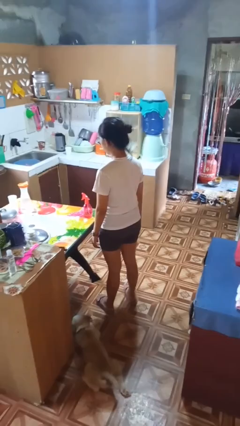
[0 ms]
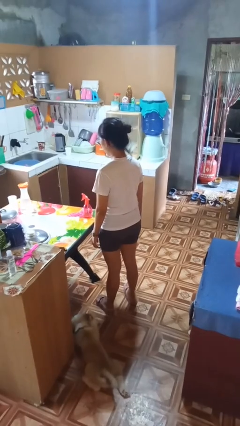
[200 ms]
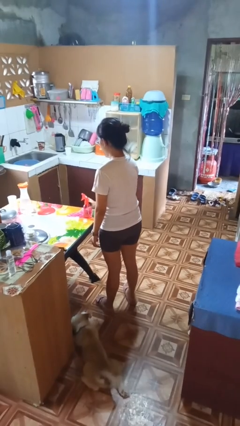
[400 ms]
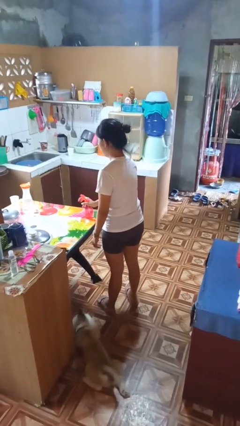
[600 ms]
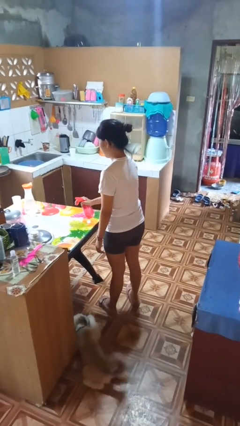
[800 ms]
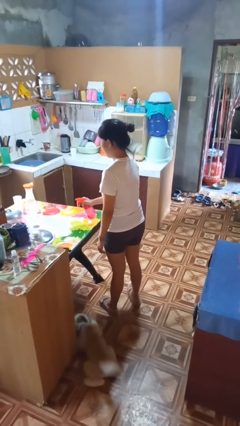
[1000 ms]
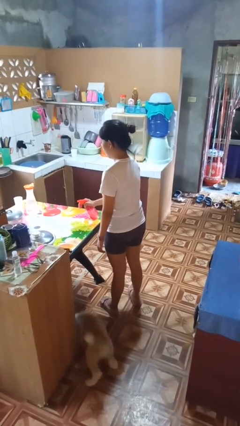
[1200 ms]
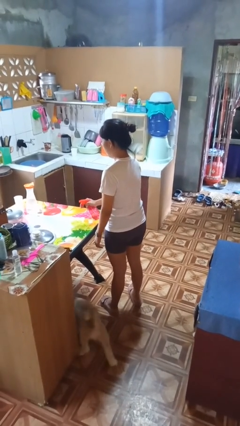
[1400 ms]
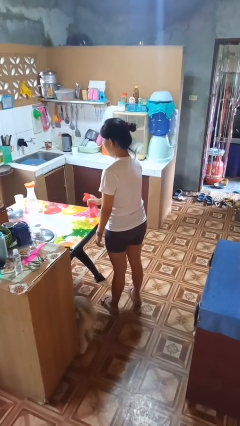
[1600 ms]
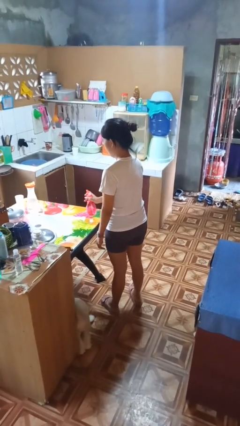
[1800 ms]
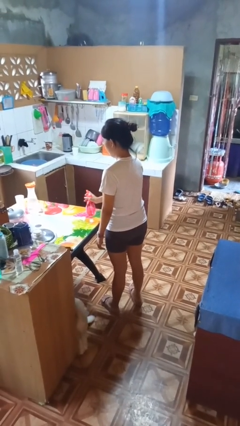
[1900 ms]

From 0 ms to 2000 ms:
person sprays from bottle

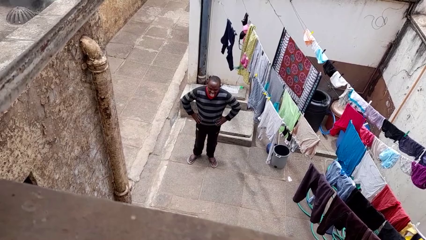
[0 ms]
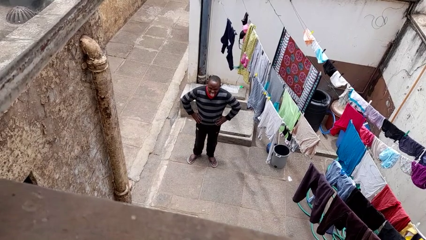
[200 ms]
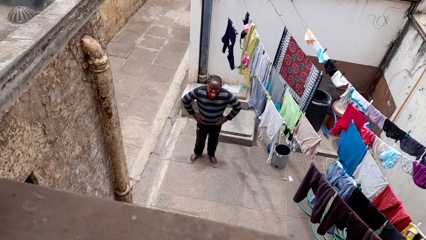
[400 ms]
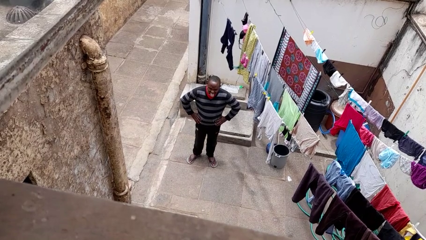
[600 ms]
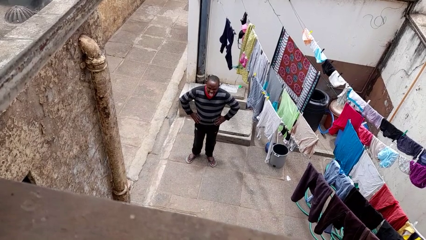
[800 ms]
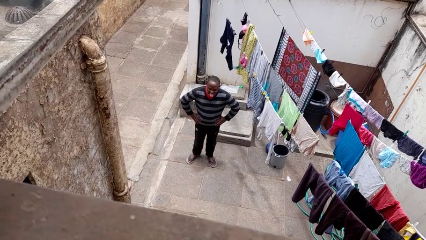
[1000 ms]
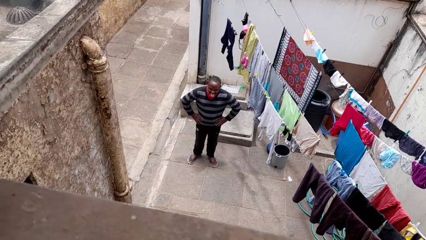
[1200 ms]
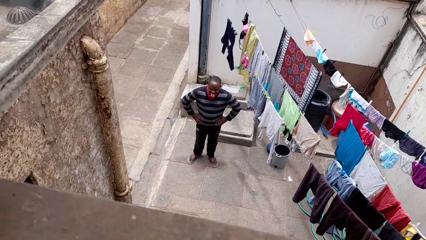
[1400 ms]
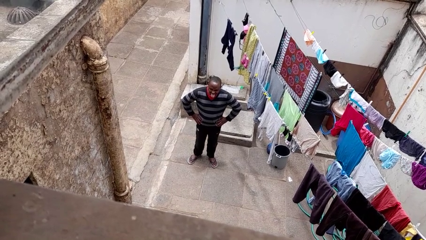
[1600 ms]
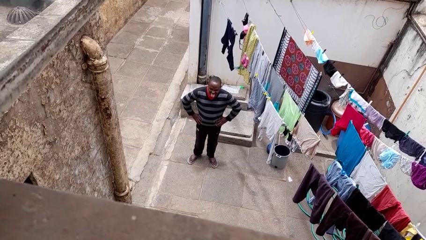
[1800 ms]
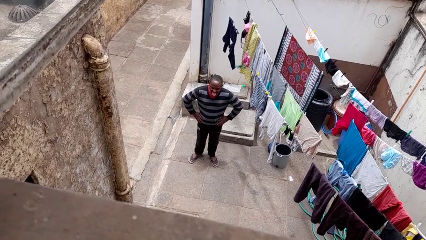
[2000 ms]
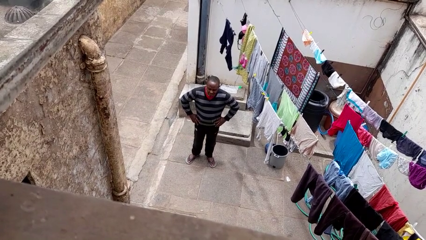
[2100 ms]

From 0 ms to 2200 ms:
person sticks out tongue

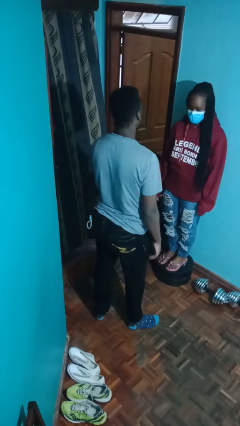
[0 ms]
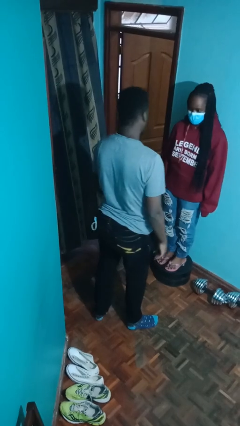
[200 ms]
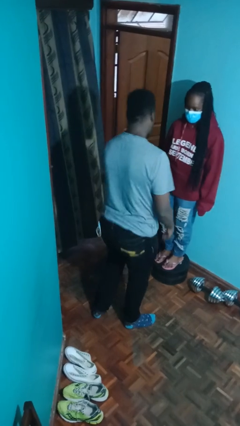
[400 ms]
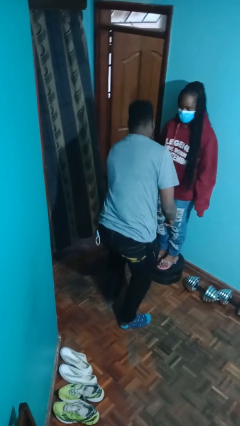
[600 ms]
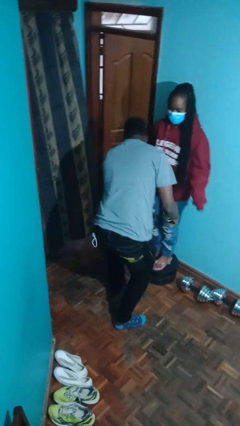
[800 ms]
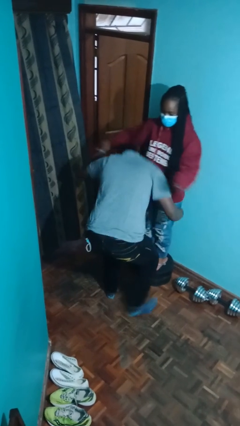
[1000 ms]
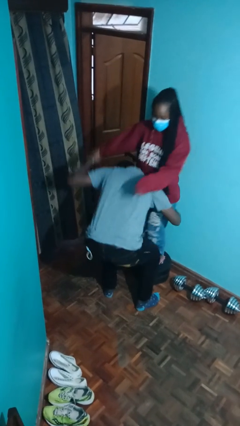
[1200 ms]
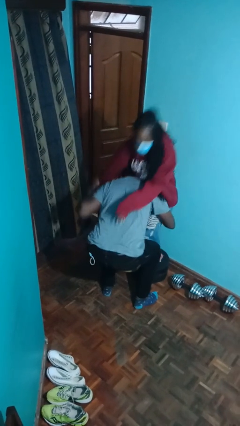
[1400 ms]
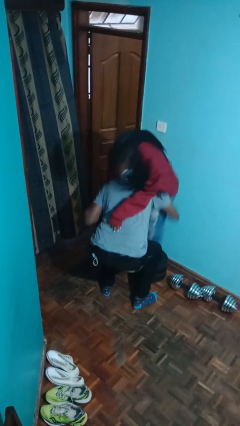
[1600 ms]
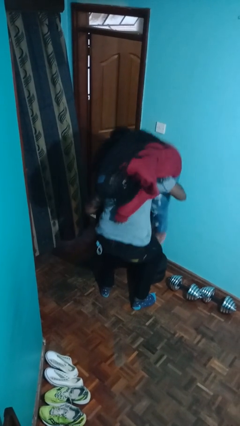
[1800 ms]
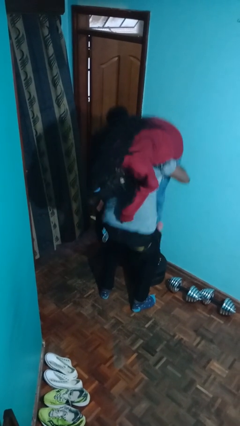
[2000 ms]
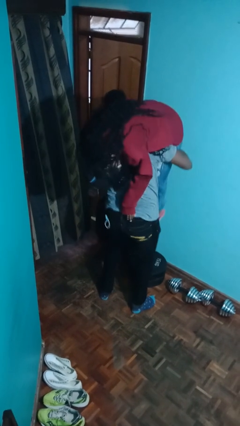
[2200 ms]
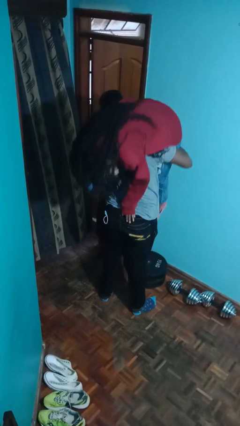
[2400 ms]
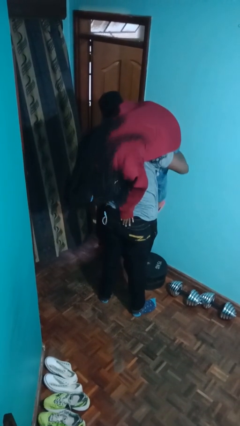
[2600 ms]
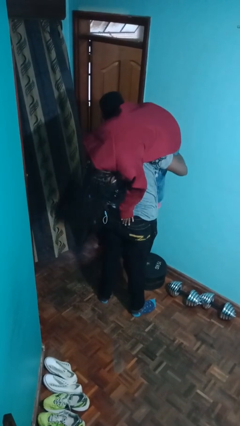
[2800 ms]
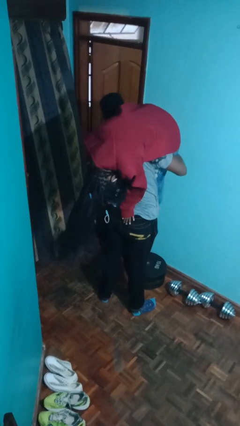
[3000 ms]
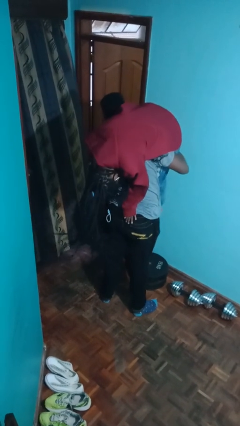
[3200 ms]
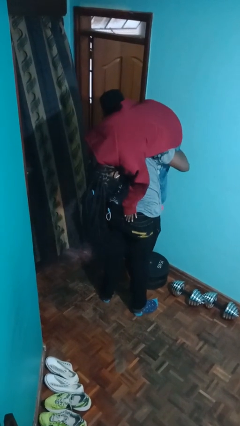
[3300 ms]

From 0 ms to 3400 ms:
person carries person over shoulder

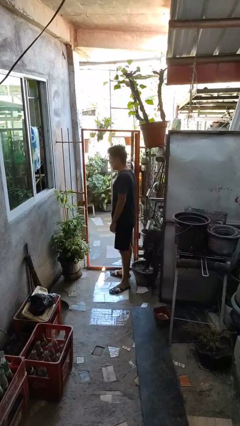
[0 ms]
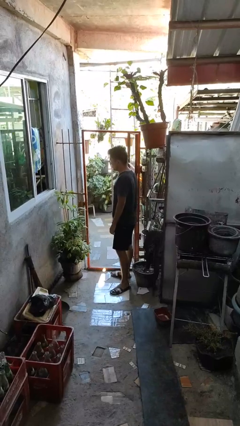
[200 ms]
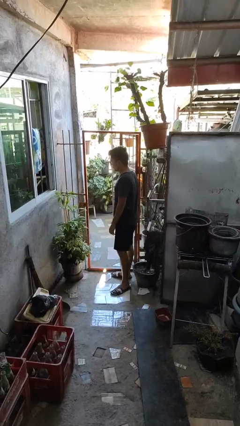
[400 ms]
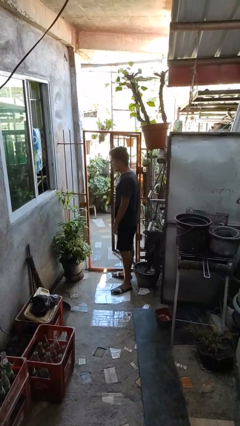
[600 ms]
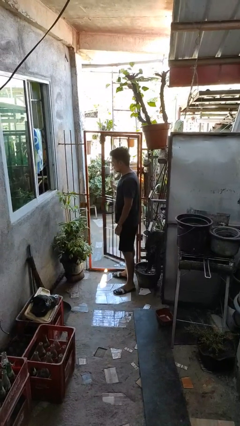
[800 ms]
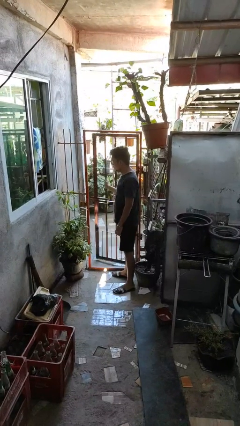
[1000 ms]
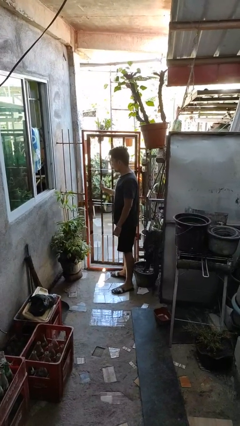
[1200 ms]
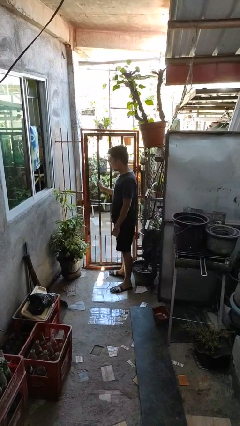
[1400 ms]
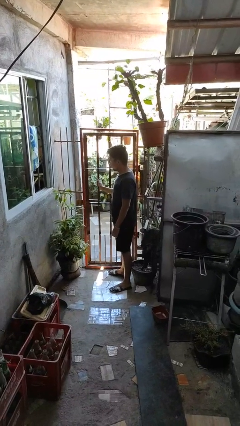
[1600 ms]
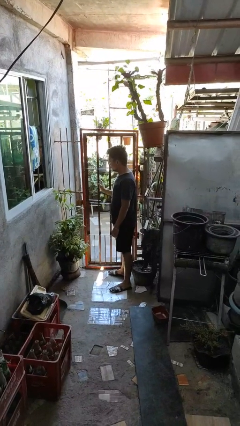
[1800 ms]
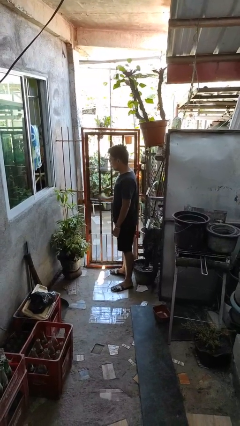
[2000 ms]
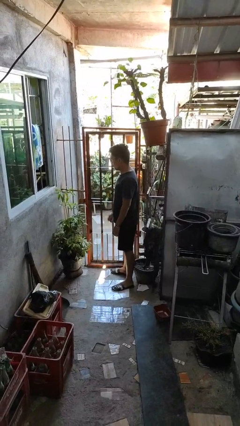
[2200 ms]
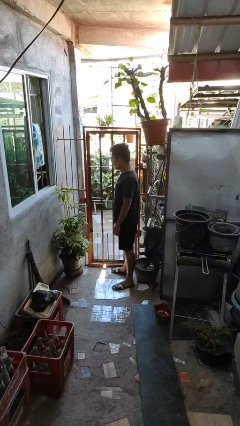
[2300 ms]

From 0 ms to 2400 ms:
person closes gate

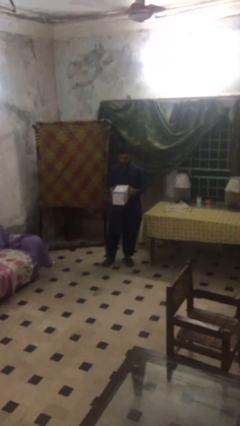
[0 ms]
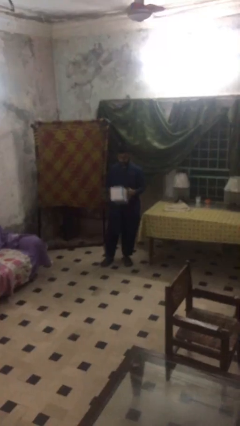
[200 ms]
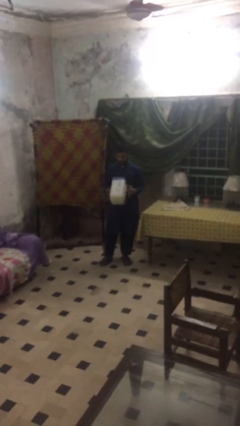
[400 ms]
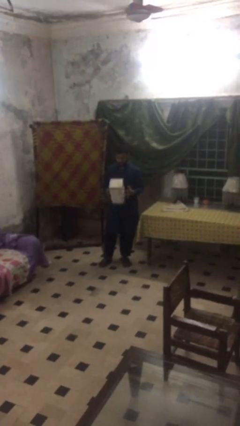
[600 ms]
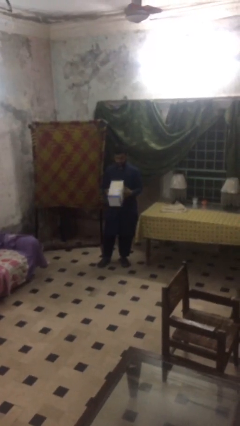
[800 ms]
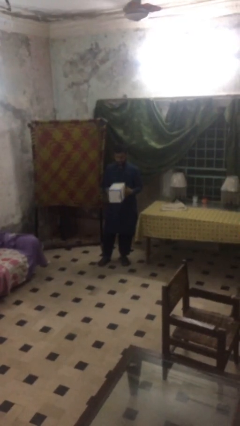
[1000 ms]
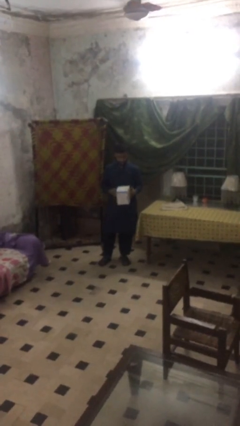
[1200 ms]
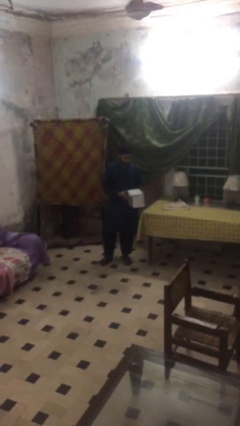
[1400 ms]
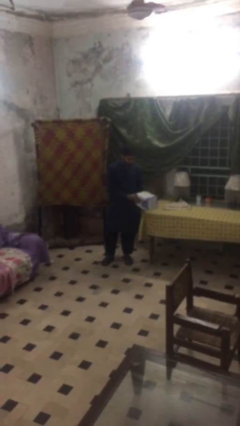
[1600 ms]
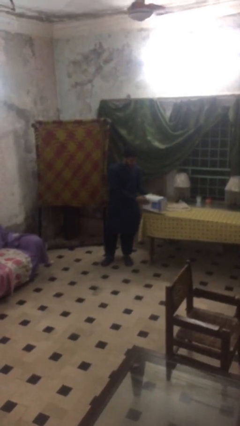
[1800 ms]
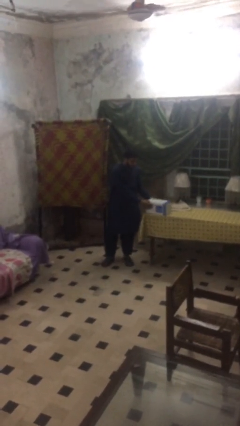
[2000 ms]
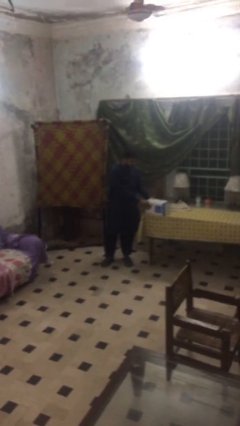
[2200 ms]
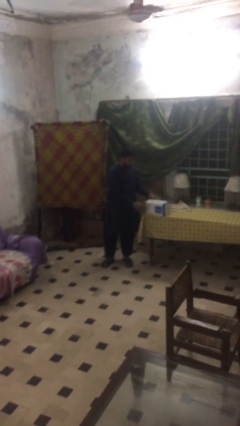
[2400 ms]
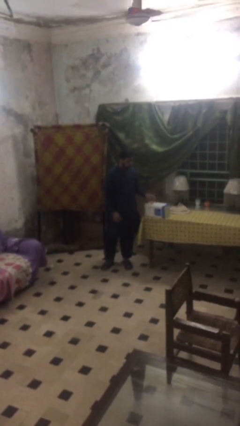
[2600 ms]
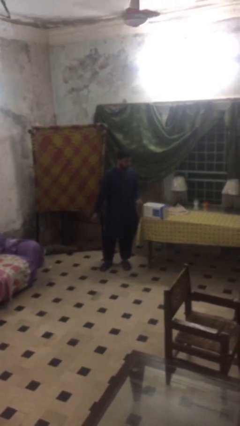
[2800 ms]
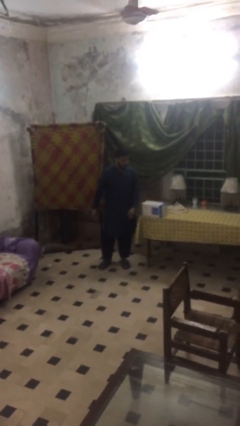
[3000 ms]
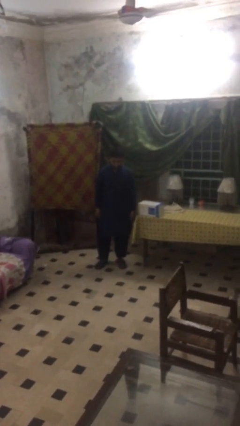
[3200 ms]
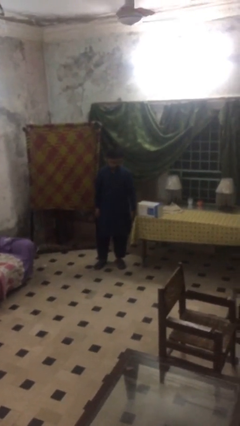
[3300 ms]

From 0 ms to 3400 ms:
person puts down object on table

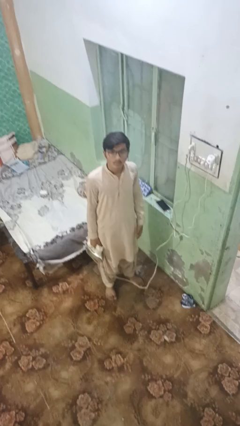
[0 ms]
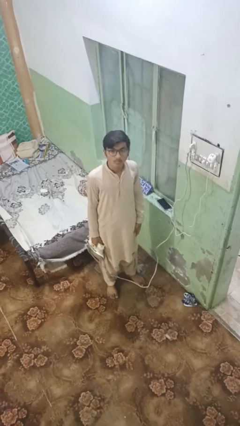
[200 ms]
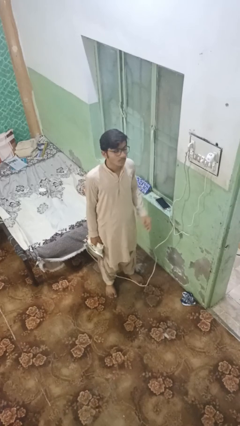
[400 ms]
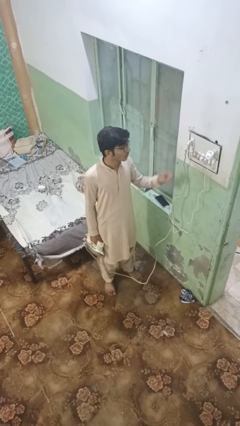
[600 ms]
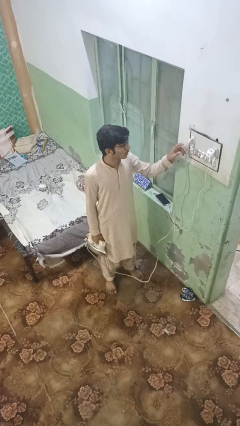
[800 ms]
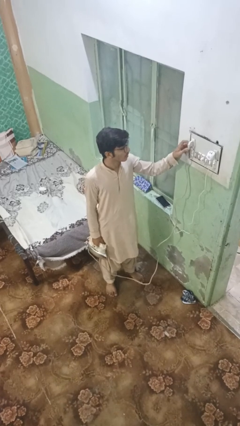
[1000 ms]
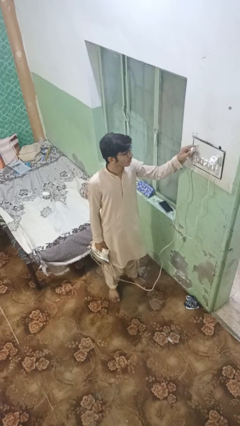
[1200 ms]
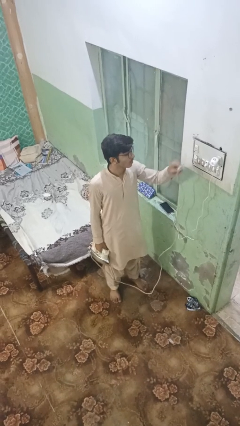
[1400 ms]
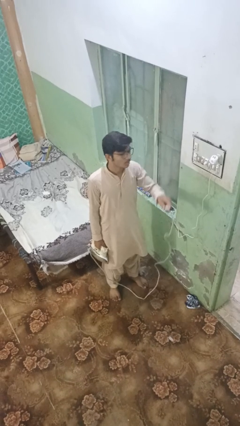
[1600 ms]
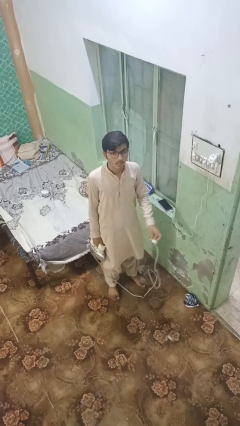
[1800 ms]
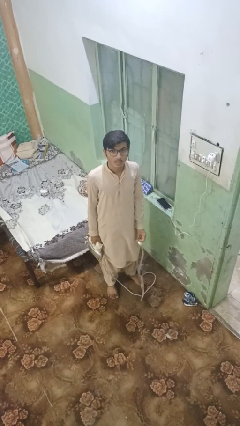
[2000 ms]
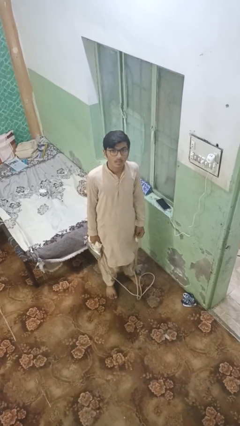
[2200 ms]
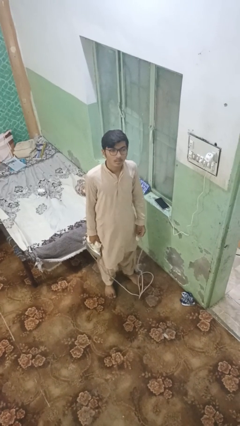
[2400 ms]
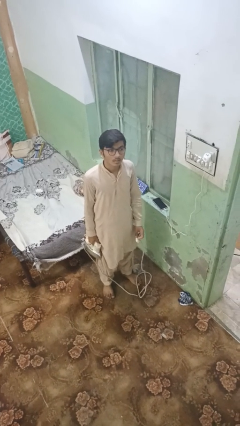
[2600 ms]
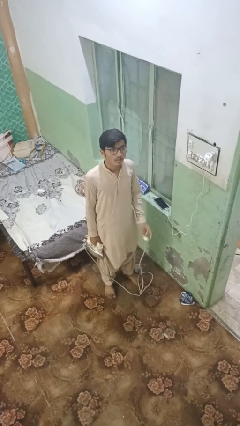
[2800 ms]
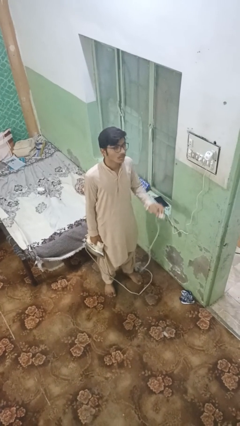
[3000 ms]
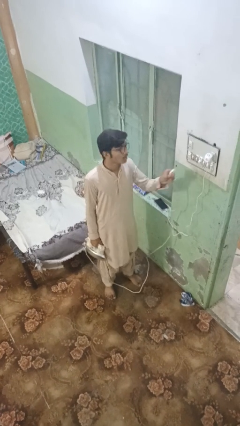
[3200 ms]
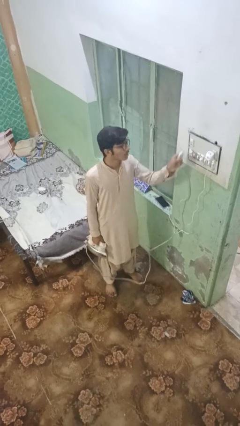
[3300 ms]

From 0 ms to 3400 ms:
person unplugs from electrical socket

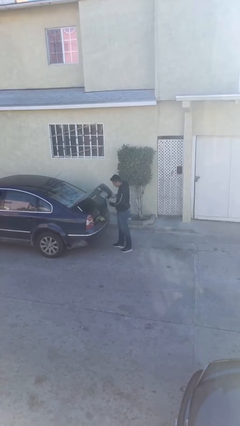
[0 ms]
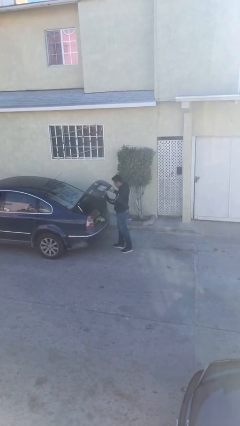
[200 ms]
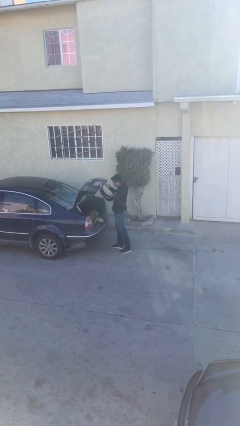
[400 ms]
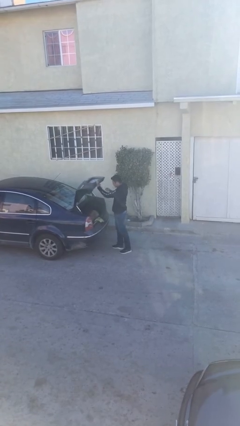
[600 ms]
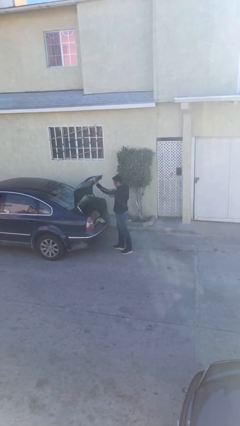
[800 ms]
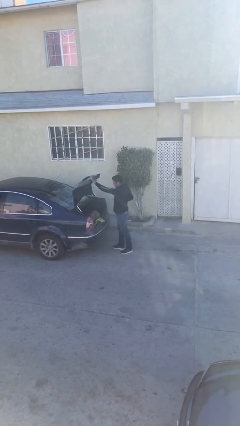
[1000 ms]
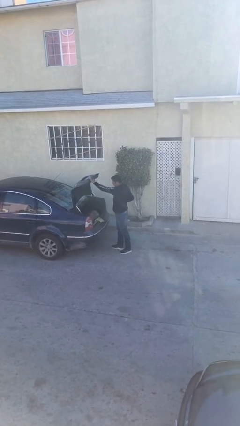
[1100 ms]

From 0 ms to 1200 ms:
person opens car trunk
